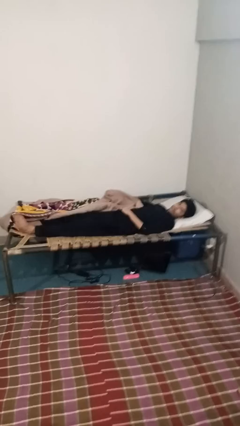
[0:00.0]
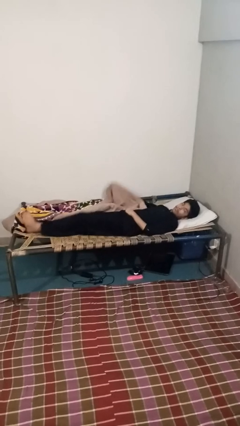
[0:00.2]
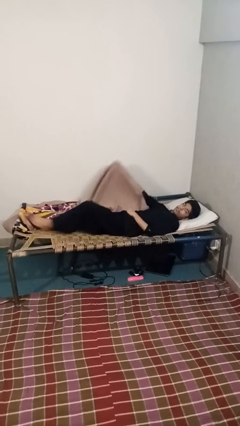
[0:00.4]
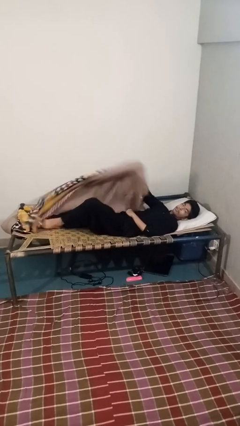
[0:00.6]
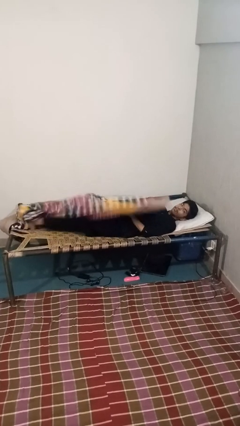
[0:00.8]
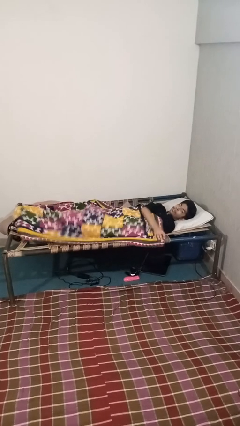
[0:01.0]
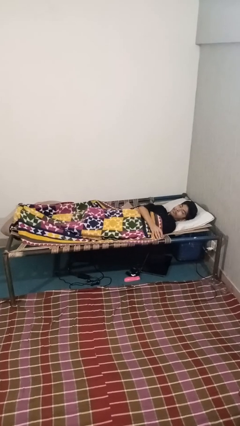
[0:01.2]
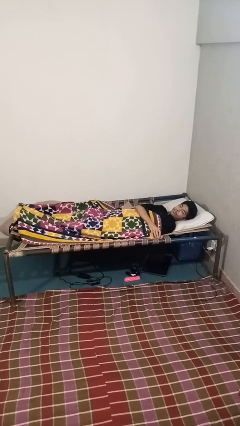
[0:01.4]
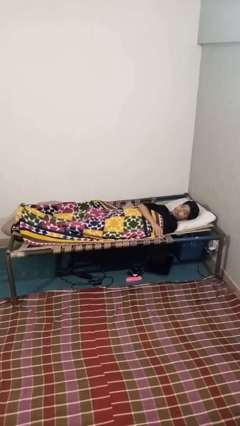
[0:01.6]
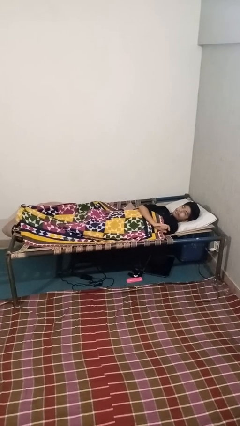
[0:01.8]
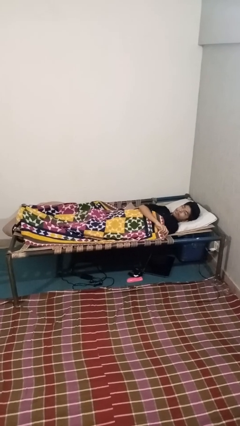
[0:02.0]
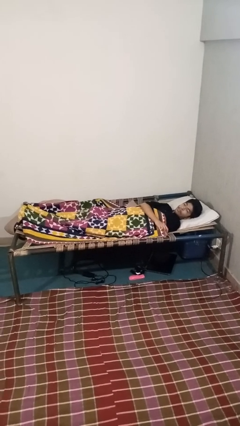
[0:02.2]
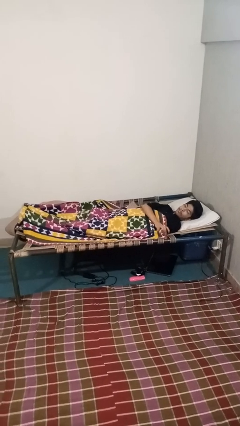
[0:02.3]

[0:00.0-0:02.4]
person covers with bedsheets

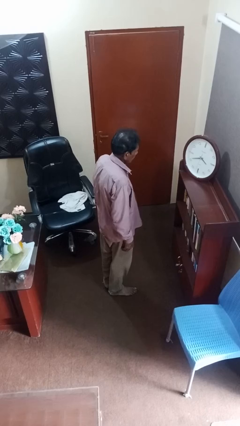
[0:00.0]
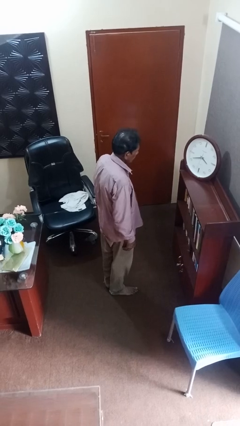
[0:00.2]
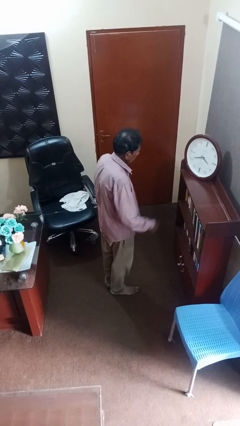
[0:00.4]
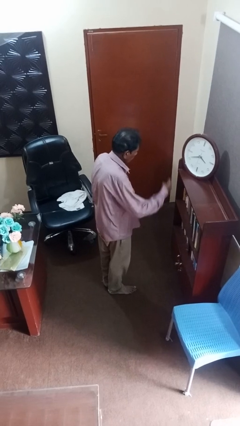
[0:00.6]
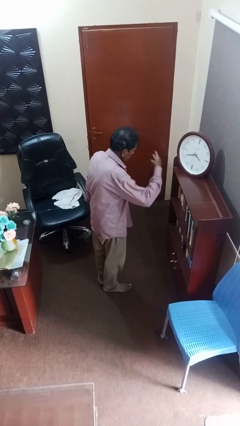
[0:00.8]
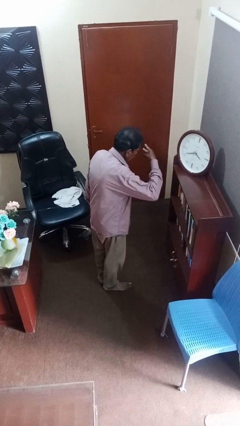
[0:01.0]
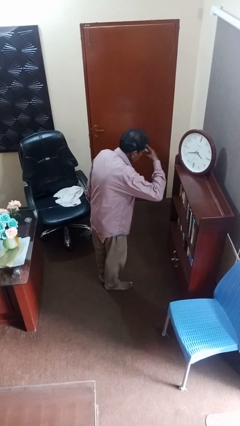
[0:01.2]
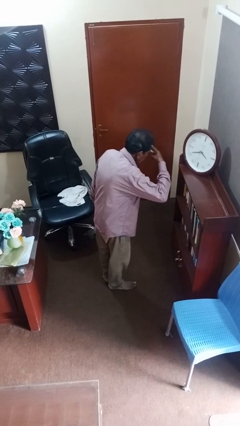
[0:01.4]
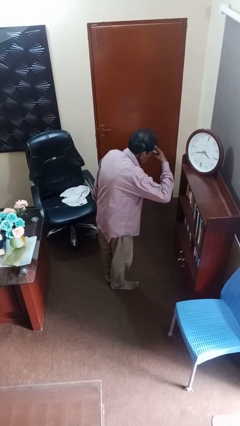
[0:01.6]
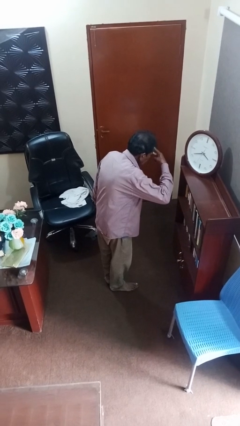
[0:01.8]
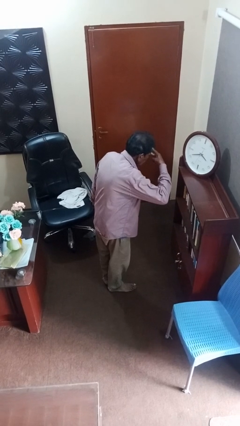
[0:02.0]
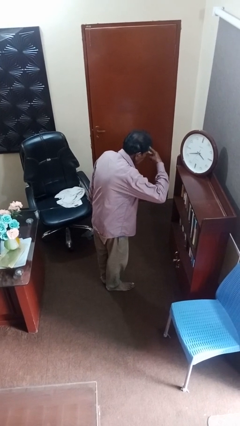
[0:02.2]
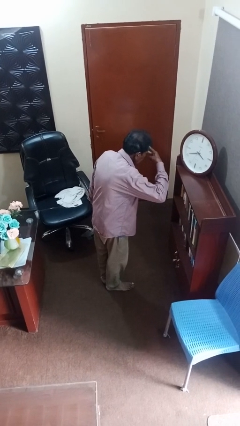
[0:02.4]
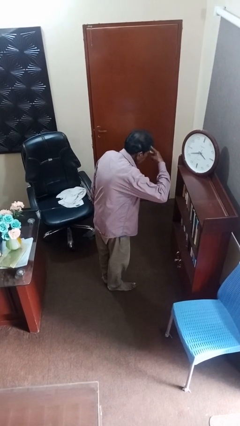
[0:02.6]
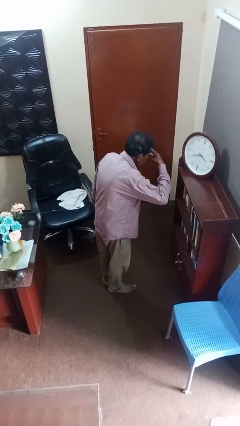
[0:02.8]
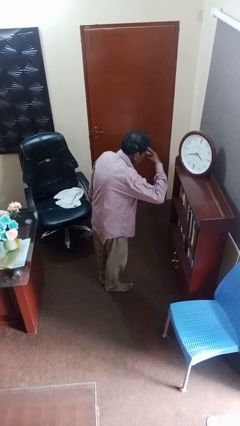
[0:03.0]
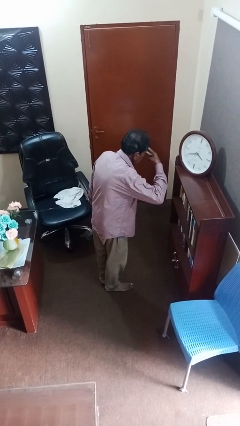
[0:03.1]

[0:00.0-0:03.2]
person gestures watch closely

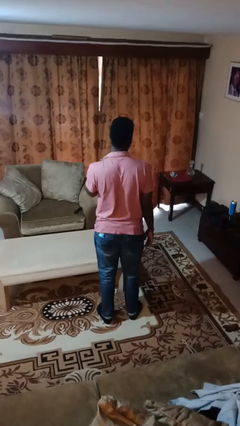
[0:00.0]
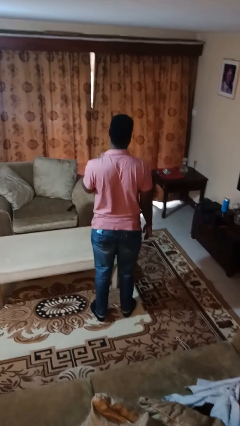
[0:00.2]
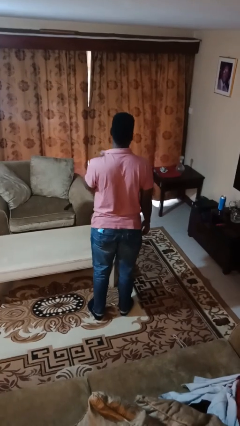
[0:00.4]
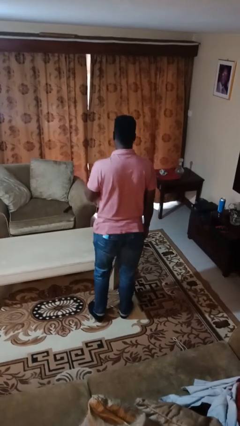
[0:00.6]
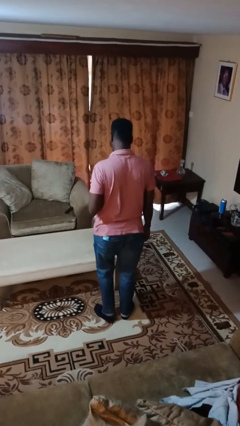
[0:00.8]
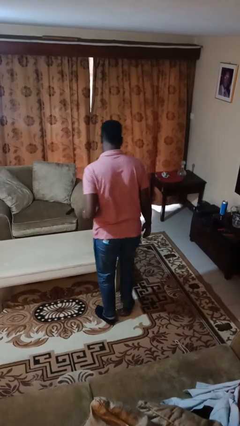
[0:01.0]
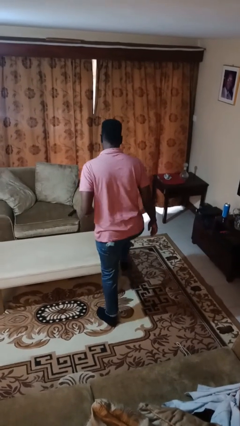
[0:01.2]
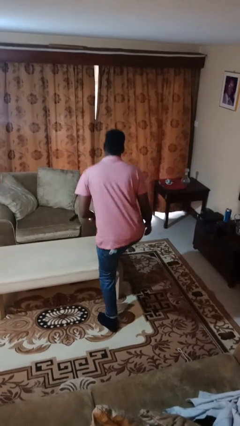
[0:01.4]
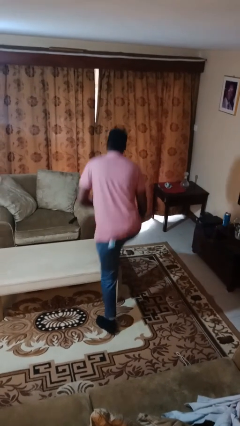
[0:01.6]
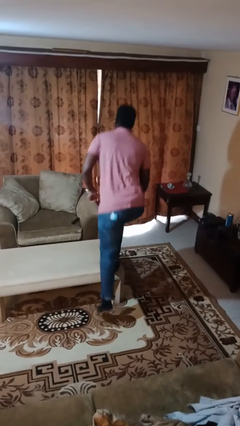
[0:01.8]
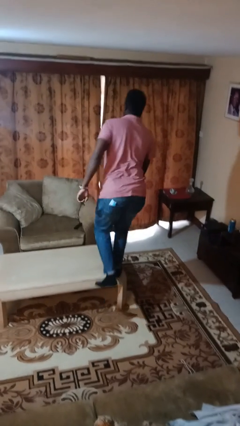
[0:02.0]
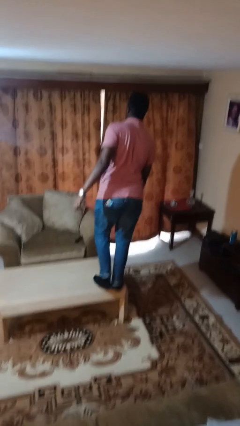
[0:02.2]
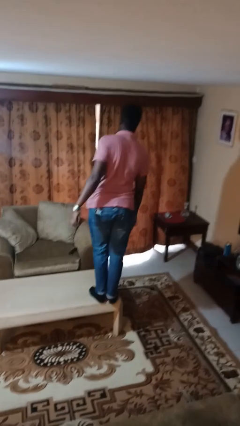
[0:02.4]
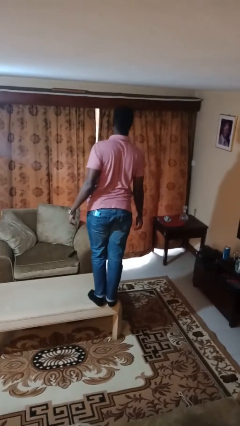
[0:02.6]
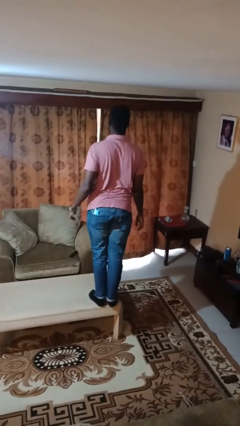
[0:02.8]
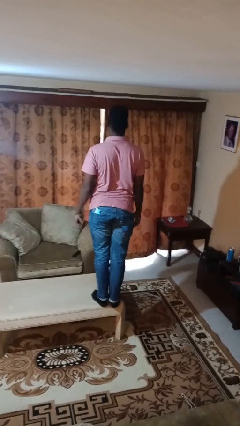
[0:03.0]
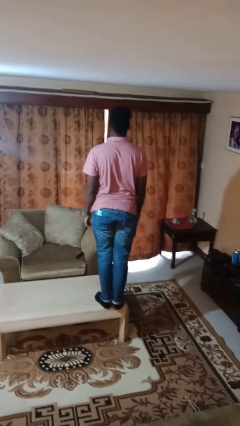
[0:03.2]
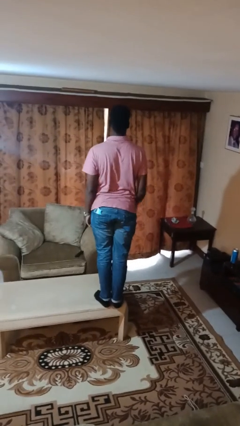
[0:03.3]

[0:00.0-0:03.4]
person climbs on table

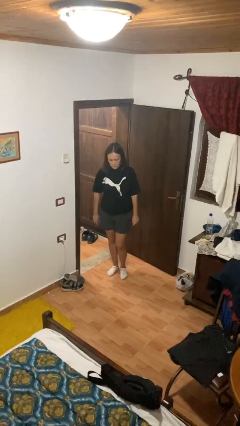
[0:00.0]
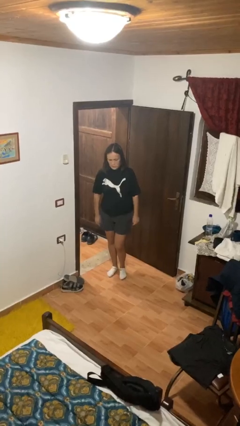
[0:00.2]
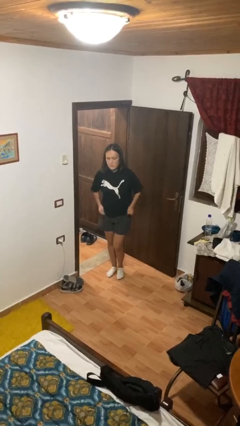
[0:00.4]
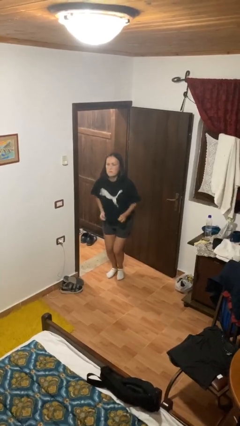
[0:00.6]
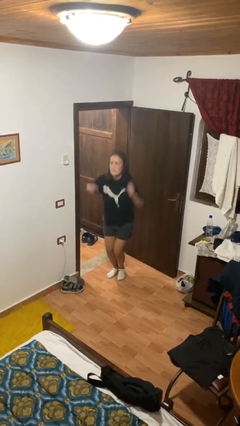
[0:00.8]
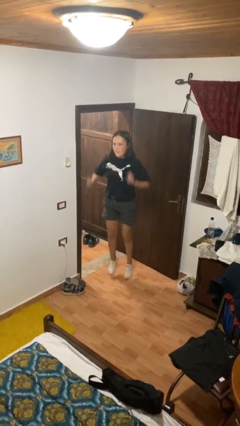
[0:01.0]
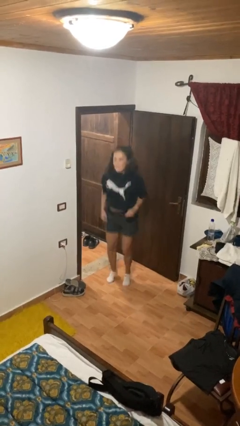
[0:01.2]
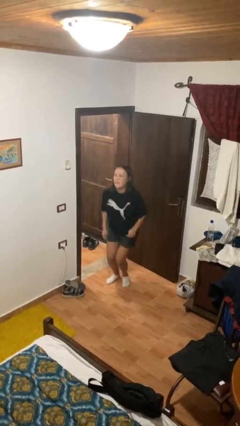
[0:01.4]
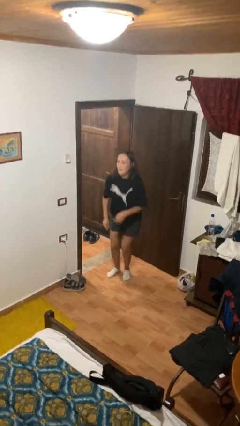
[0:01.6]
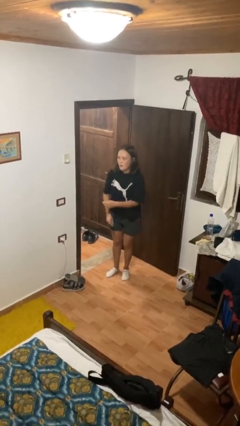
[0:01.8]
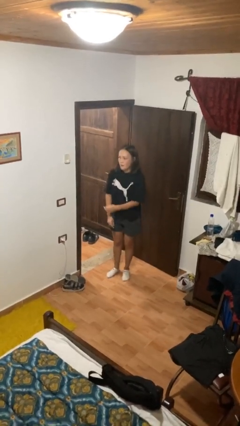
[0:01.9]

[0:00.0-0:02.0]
person jumps

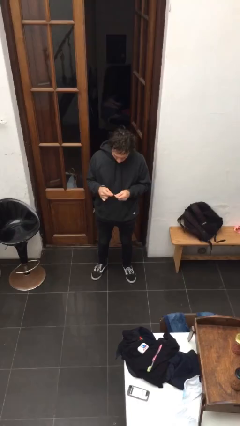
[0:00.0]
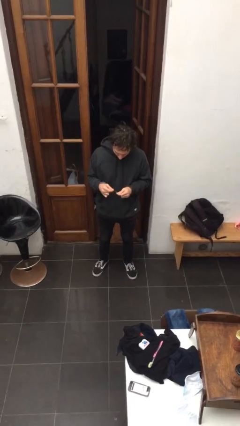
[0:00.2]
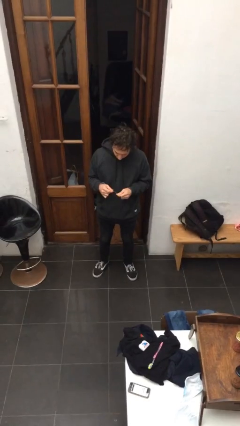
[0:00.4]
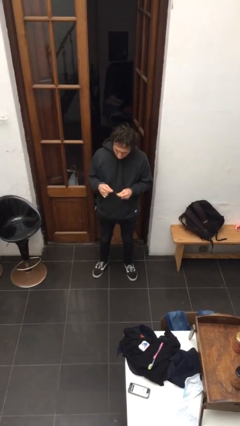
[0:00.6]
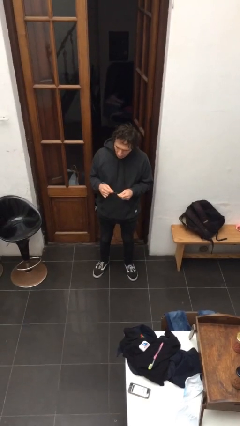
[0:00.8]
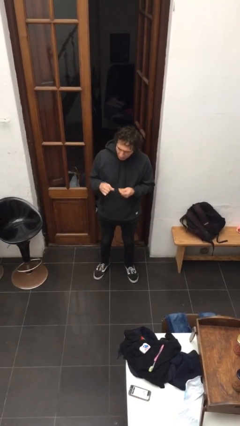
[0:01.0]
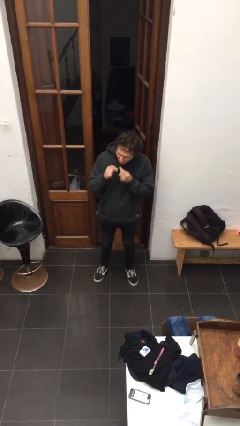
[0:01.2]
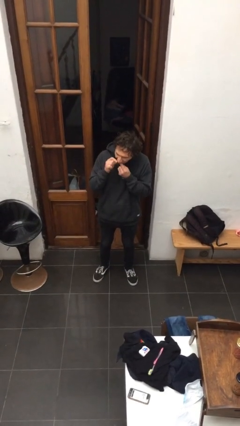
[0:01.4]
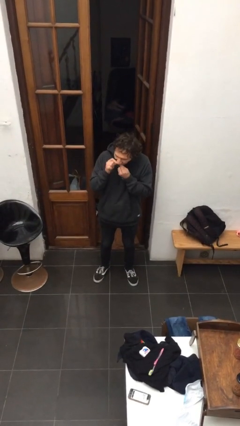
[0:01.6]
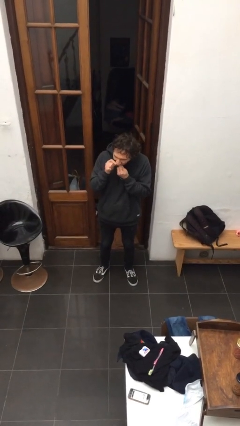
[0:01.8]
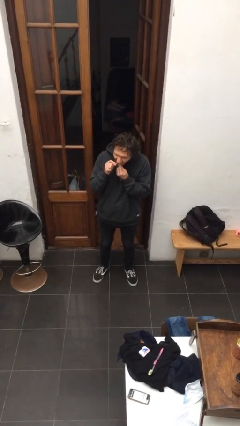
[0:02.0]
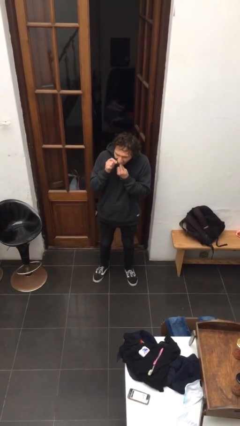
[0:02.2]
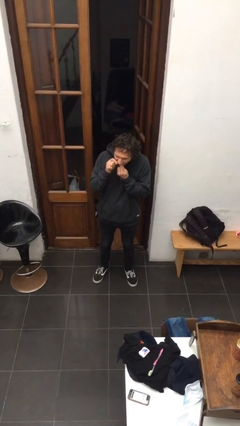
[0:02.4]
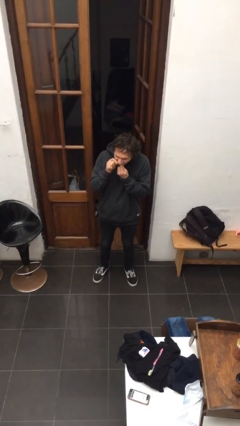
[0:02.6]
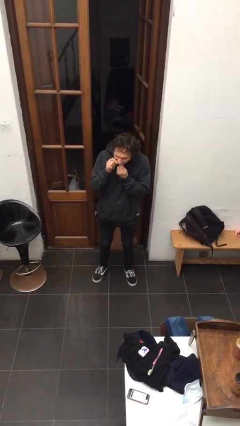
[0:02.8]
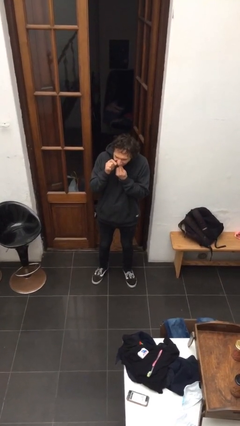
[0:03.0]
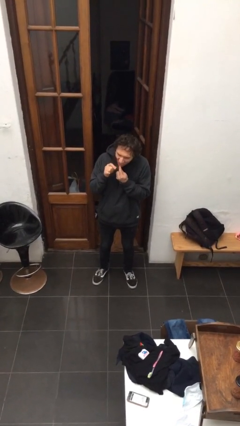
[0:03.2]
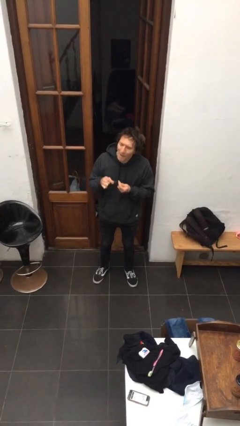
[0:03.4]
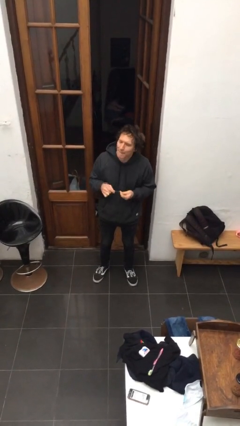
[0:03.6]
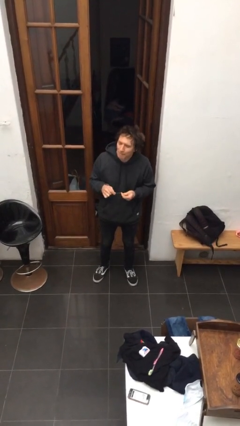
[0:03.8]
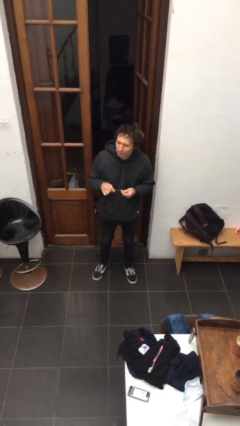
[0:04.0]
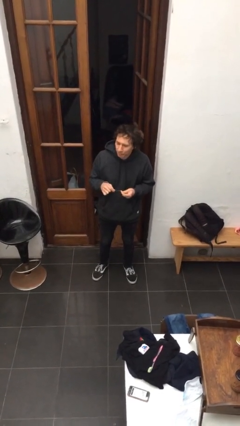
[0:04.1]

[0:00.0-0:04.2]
person flosses

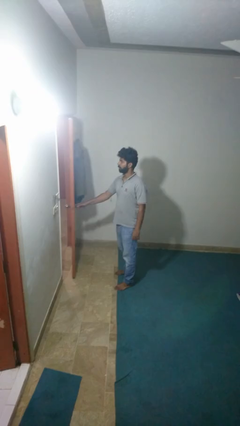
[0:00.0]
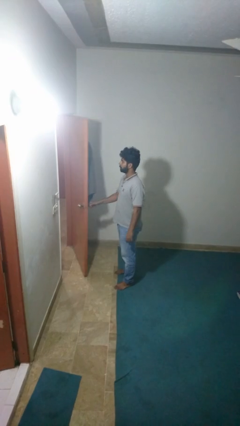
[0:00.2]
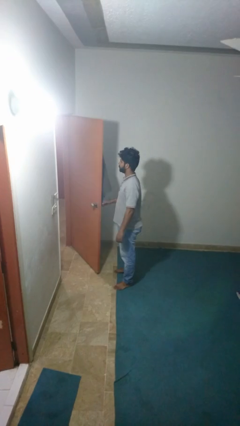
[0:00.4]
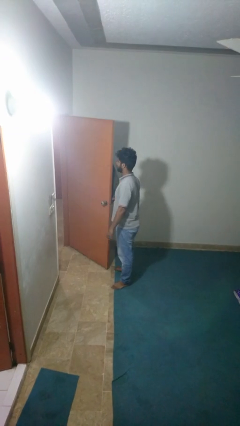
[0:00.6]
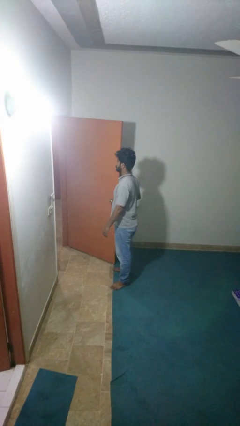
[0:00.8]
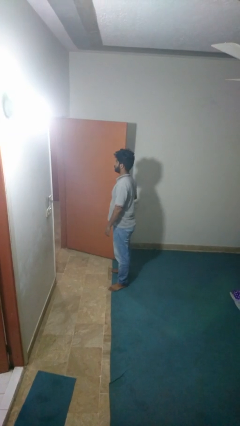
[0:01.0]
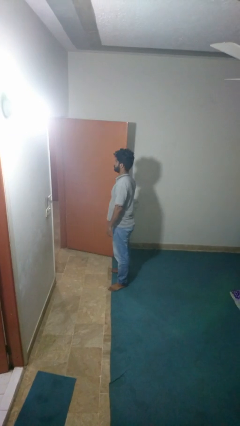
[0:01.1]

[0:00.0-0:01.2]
person opens facility door

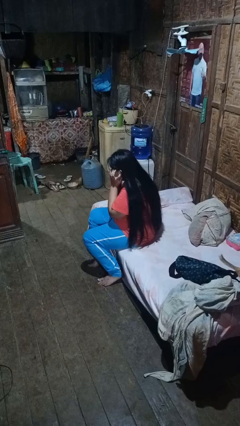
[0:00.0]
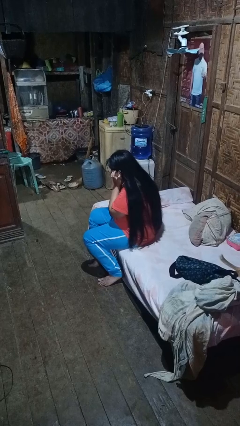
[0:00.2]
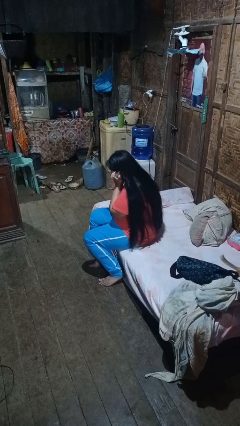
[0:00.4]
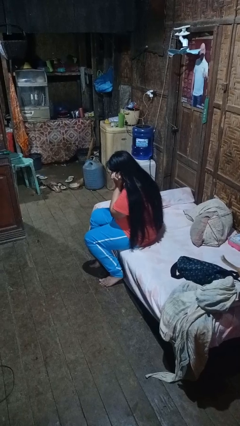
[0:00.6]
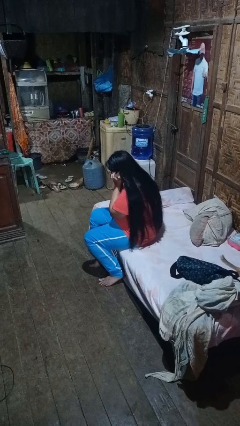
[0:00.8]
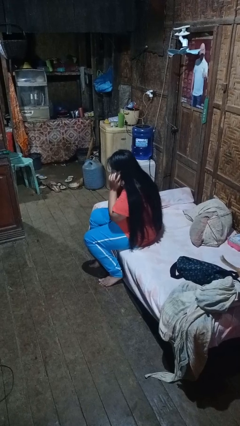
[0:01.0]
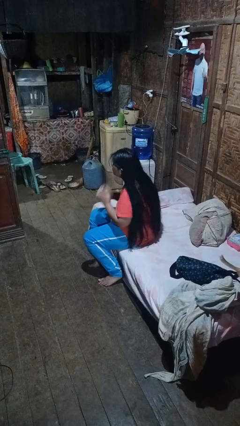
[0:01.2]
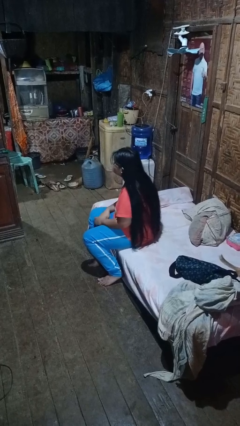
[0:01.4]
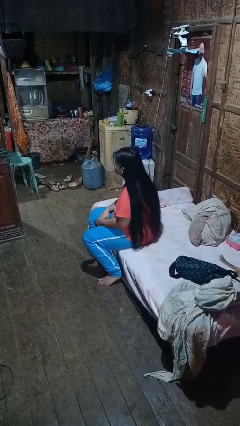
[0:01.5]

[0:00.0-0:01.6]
person puts fingers in ear
